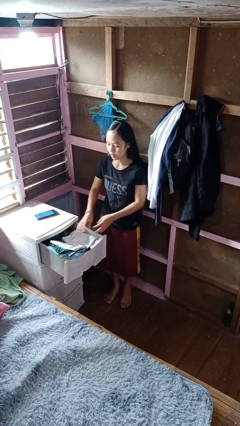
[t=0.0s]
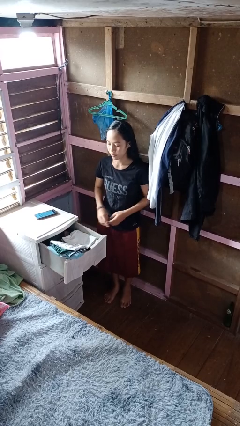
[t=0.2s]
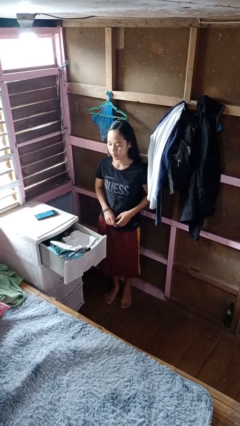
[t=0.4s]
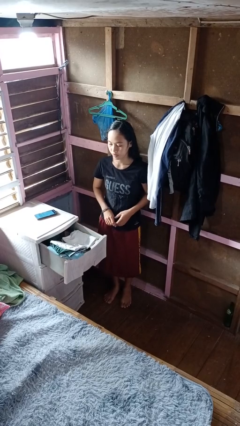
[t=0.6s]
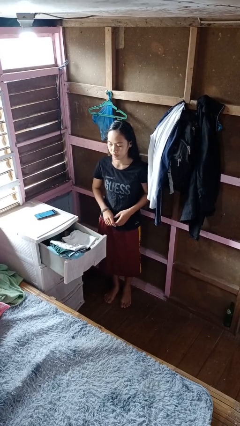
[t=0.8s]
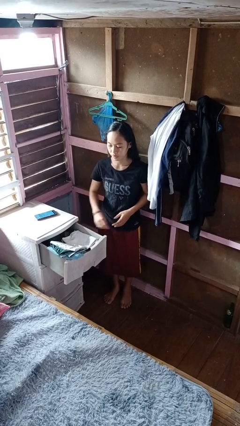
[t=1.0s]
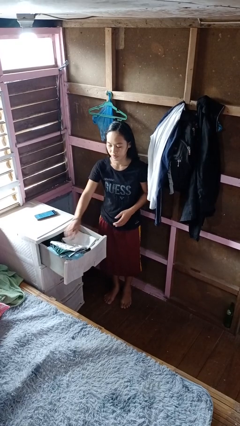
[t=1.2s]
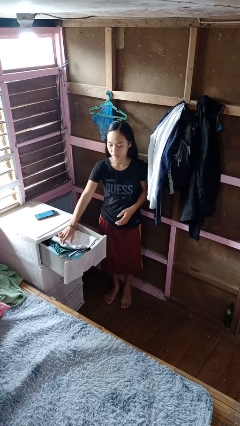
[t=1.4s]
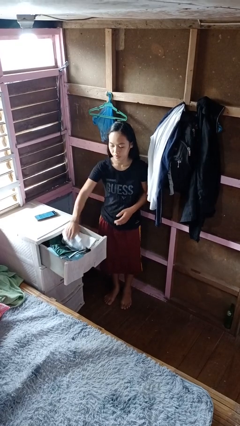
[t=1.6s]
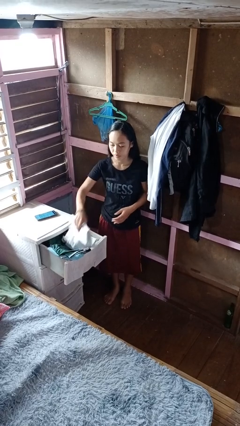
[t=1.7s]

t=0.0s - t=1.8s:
person puts clothes into dresser

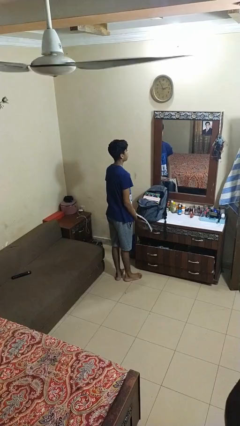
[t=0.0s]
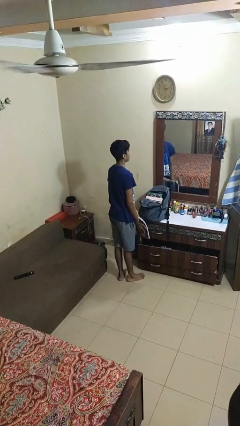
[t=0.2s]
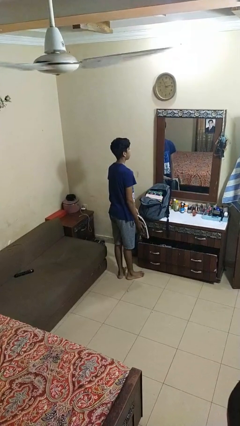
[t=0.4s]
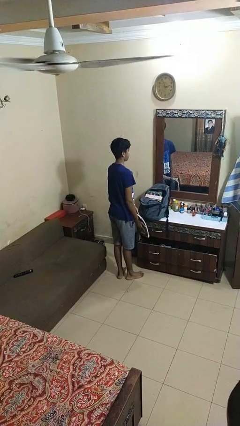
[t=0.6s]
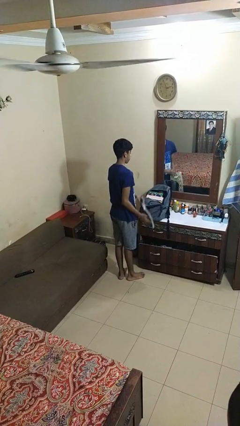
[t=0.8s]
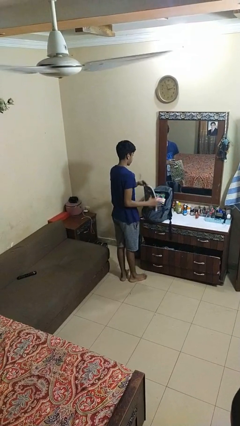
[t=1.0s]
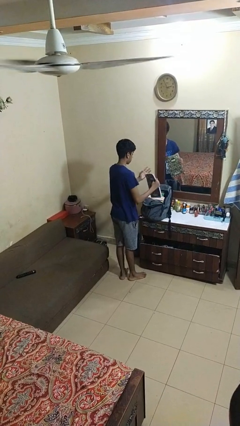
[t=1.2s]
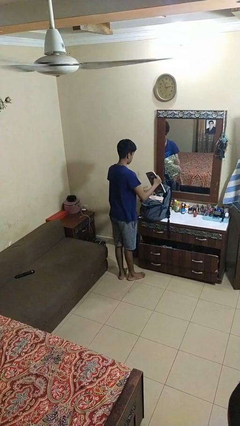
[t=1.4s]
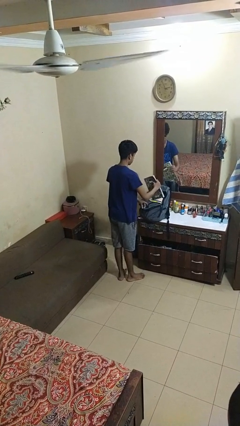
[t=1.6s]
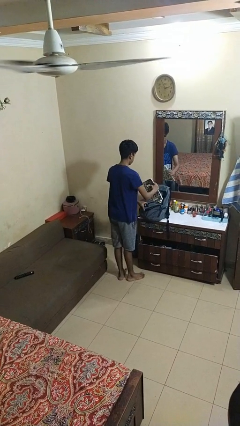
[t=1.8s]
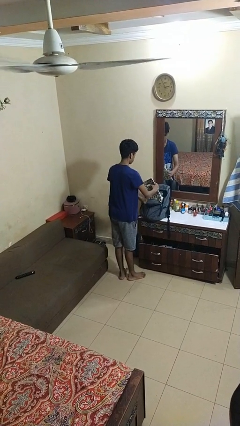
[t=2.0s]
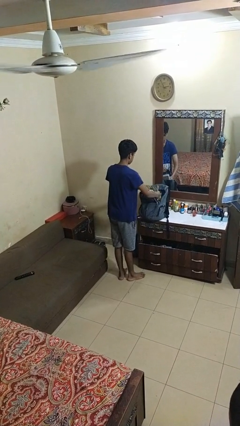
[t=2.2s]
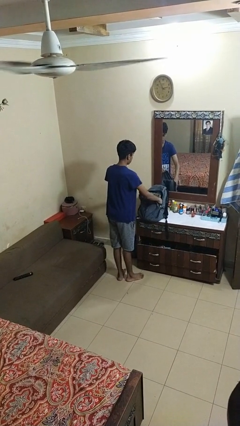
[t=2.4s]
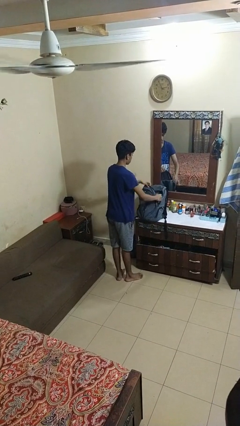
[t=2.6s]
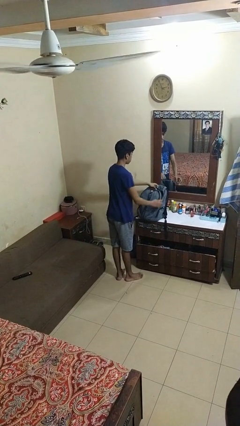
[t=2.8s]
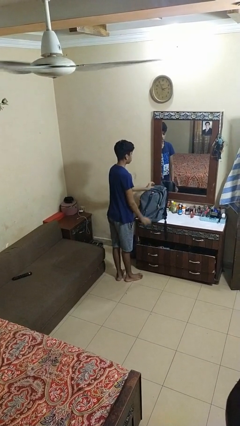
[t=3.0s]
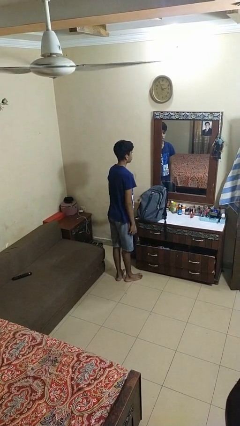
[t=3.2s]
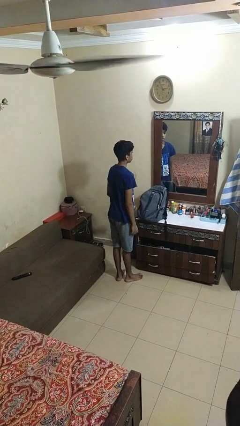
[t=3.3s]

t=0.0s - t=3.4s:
person puts object into bag

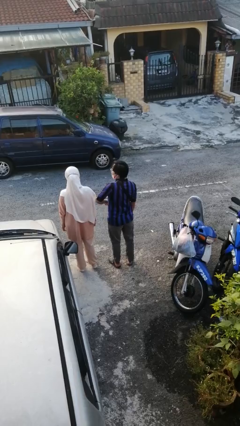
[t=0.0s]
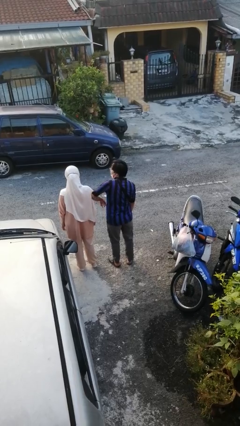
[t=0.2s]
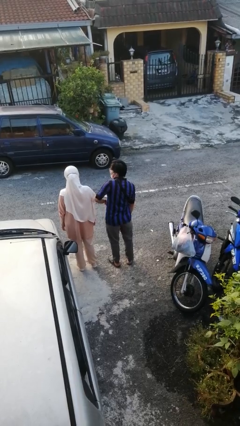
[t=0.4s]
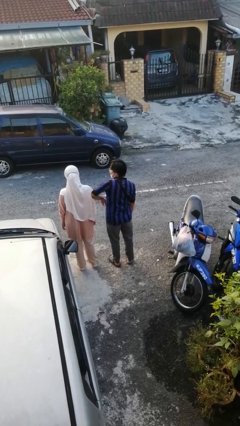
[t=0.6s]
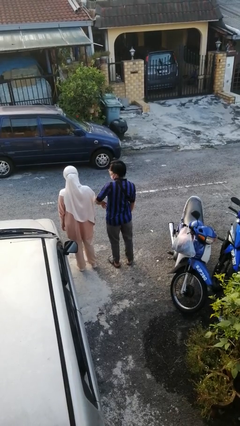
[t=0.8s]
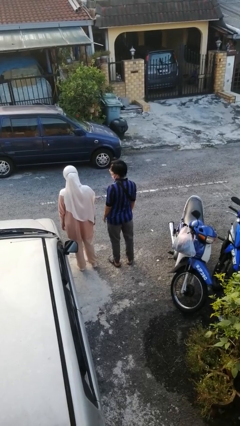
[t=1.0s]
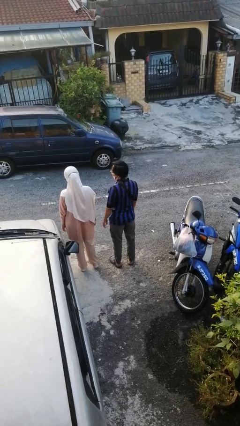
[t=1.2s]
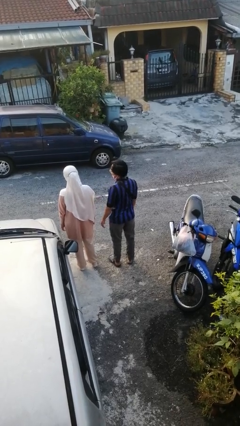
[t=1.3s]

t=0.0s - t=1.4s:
person nudges person with elbow

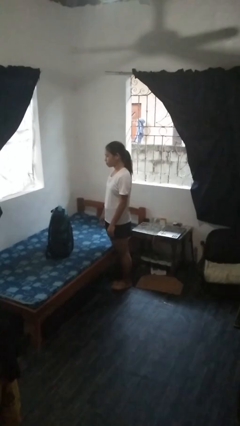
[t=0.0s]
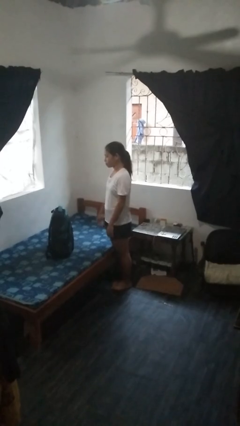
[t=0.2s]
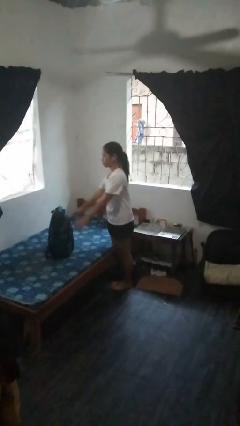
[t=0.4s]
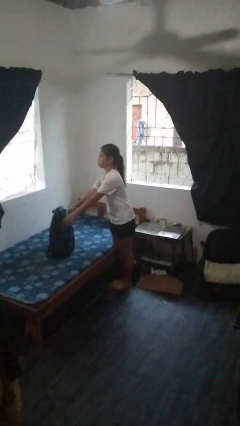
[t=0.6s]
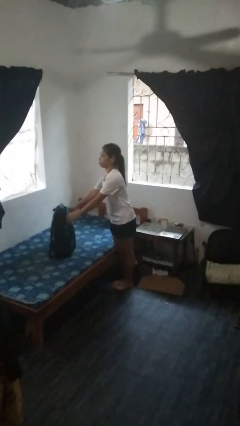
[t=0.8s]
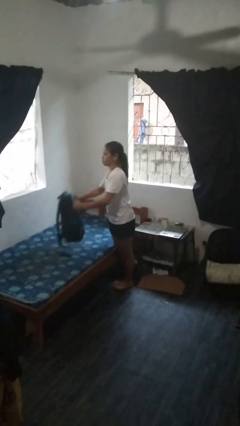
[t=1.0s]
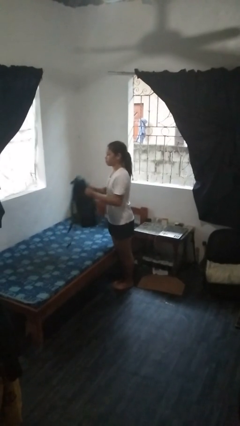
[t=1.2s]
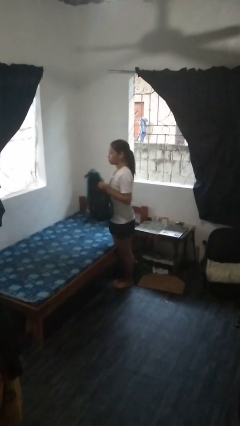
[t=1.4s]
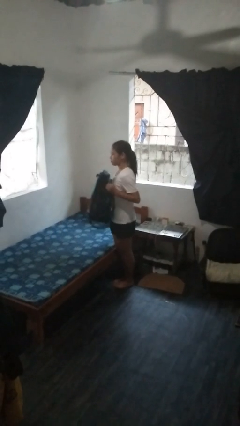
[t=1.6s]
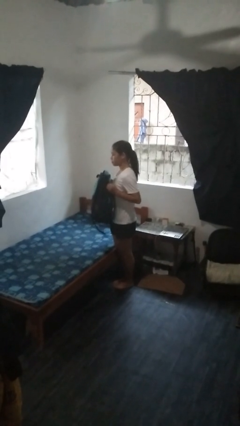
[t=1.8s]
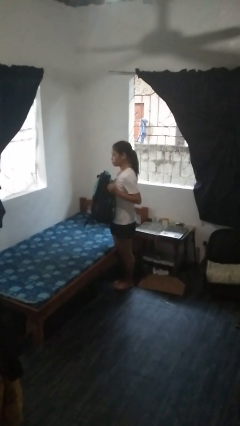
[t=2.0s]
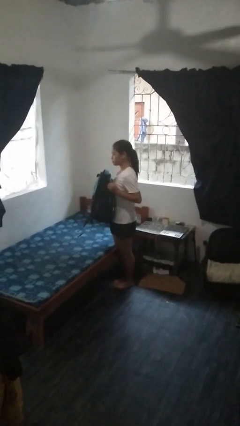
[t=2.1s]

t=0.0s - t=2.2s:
person picks up object from bed

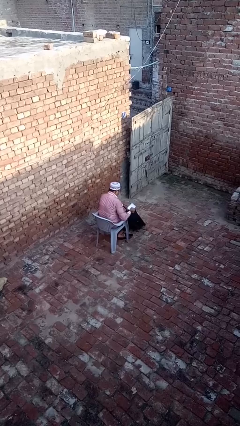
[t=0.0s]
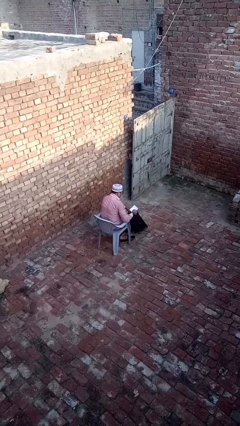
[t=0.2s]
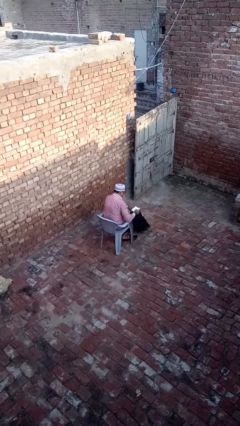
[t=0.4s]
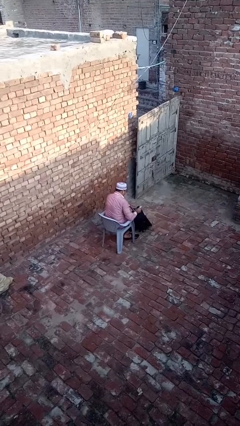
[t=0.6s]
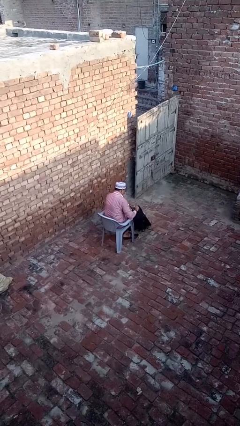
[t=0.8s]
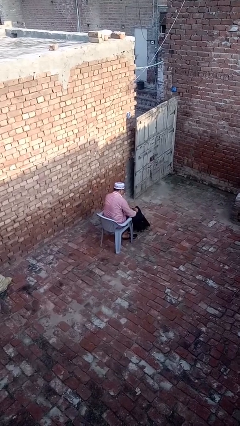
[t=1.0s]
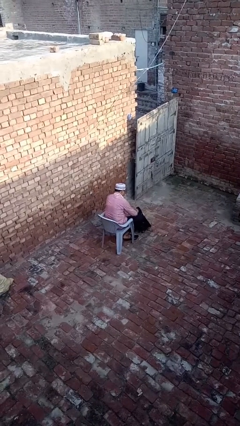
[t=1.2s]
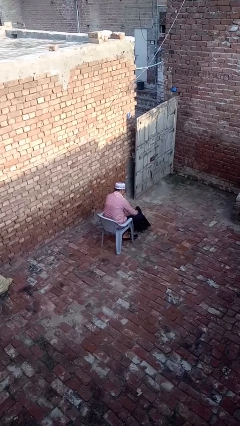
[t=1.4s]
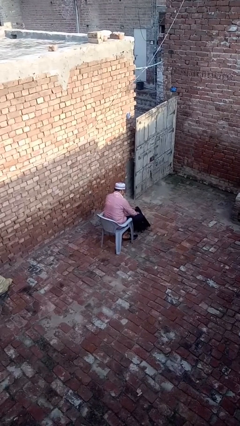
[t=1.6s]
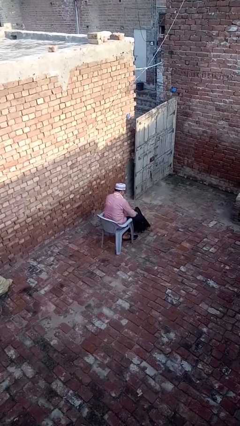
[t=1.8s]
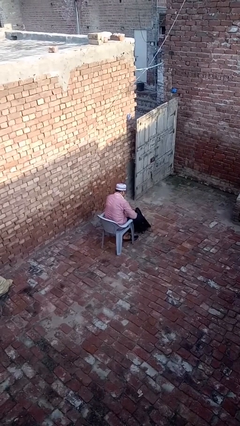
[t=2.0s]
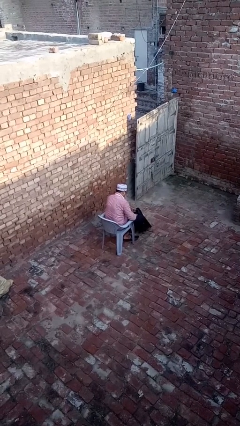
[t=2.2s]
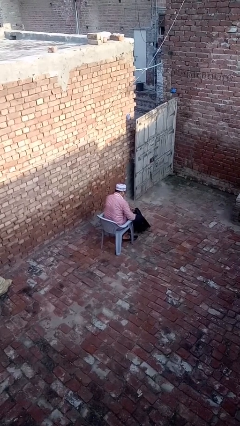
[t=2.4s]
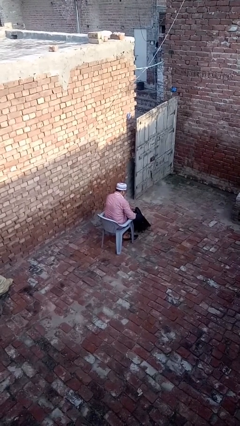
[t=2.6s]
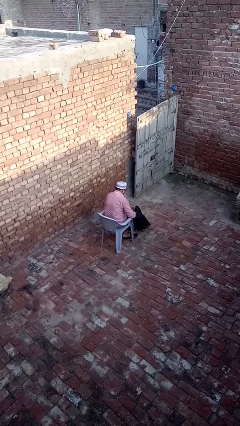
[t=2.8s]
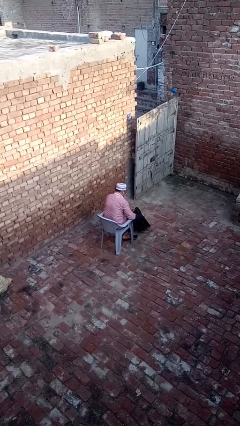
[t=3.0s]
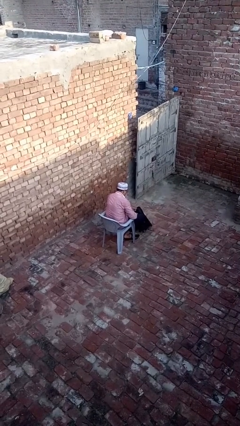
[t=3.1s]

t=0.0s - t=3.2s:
person puts object into backpack

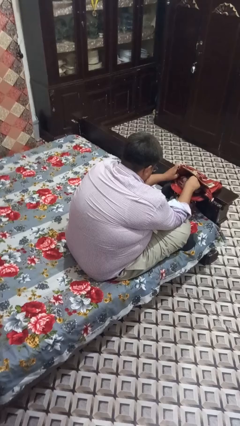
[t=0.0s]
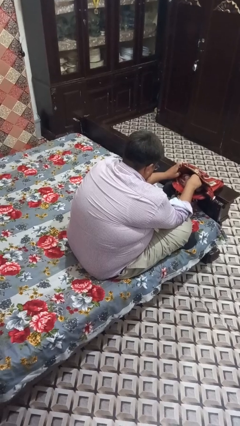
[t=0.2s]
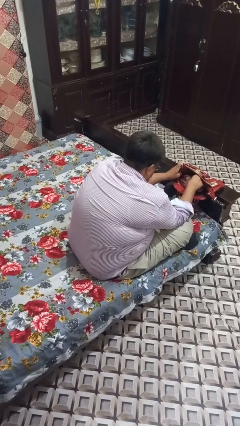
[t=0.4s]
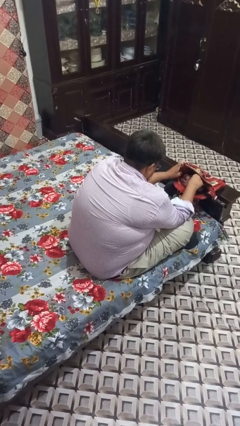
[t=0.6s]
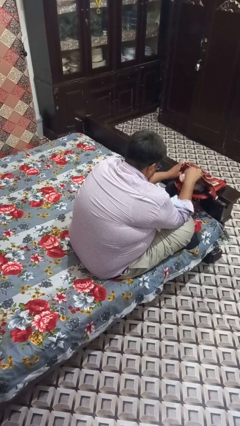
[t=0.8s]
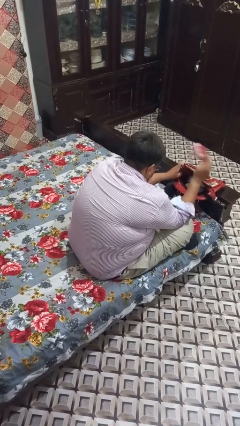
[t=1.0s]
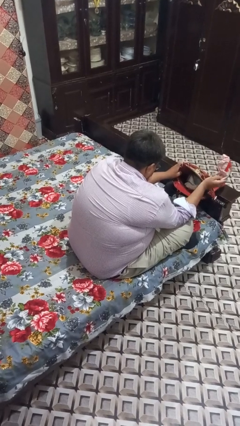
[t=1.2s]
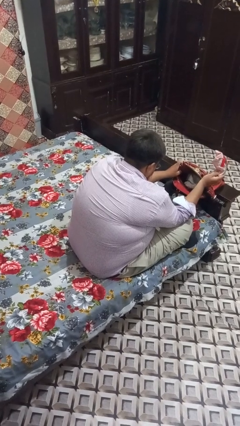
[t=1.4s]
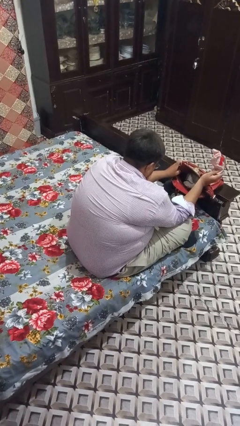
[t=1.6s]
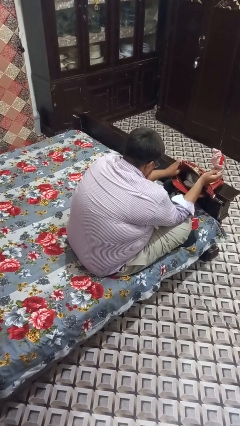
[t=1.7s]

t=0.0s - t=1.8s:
person takes object from purse

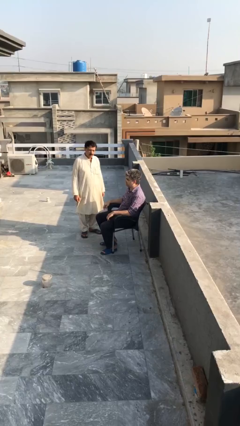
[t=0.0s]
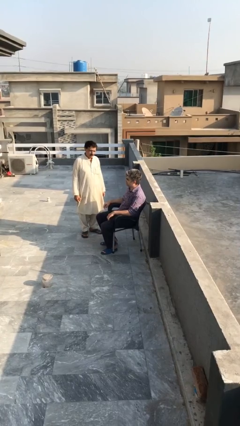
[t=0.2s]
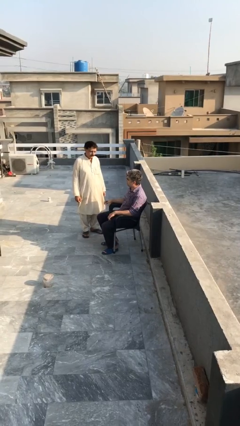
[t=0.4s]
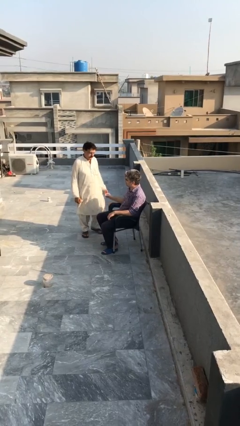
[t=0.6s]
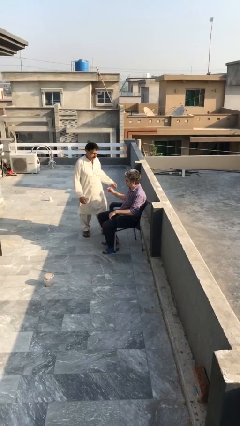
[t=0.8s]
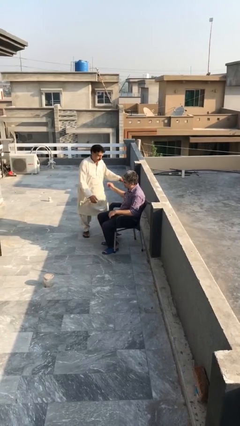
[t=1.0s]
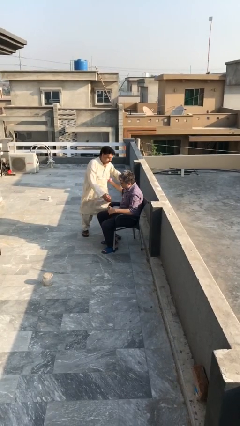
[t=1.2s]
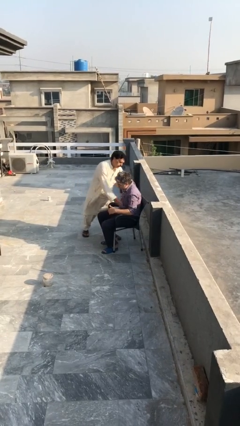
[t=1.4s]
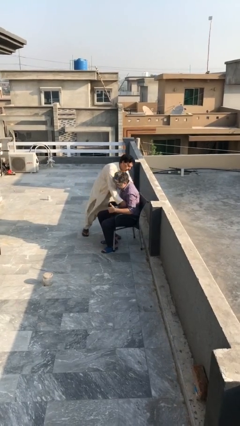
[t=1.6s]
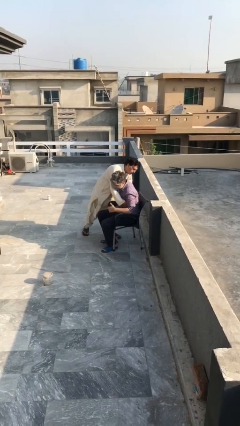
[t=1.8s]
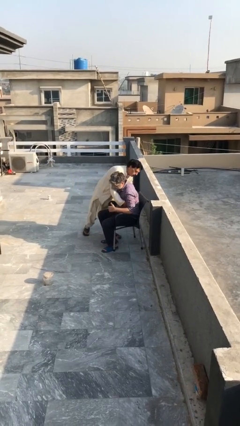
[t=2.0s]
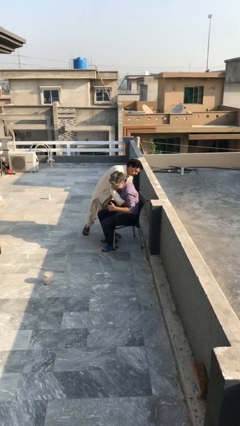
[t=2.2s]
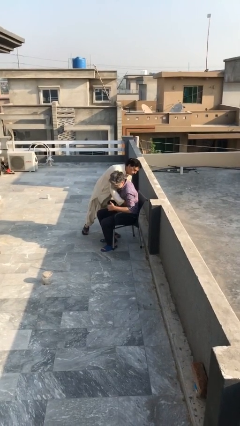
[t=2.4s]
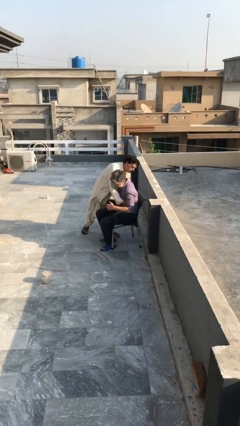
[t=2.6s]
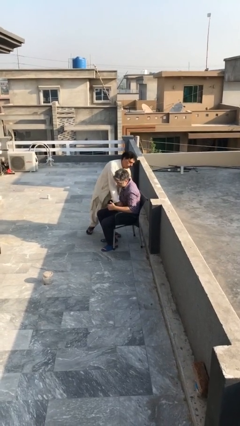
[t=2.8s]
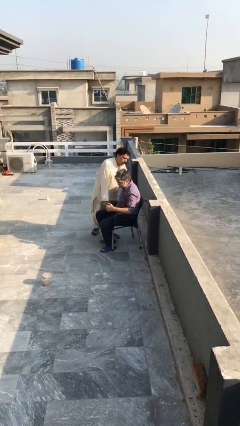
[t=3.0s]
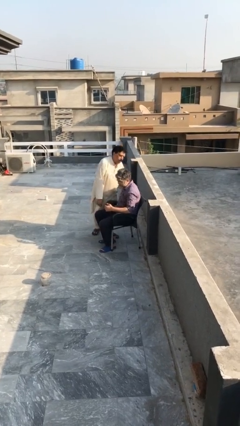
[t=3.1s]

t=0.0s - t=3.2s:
person embraces person

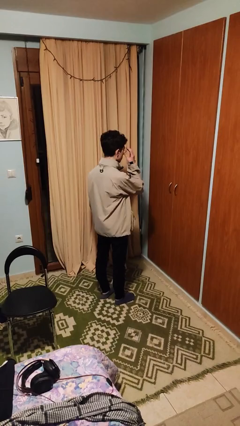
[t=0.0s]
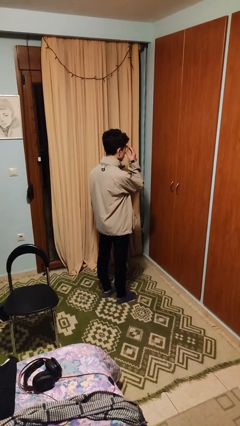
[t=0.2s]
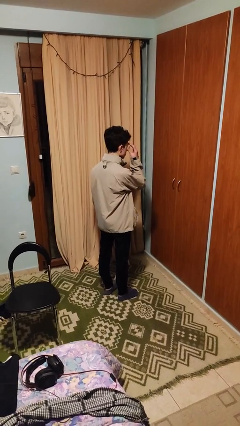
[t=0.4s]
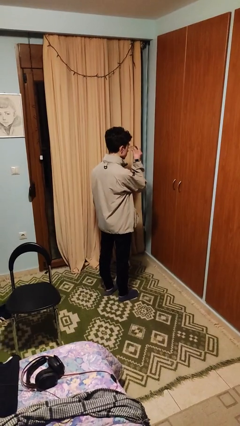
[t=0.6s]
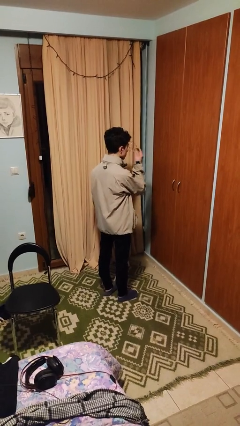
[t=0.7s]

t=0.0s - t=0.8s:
person takes off glasses
